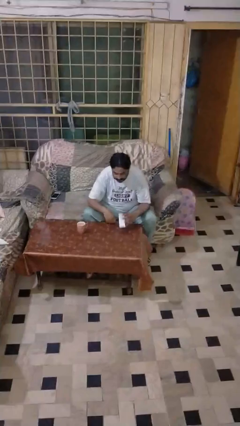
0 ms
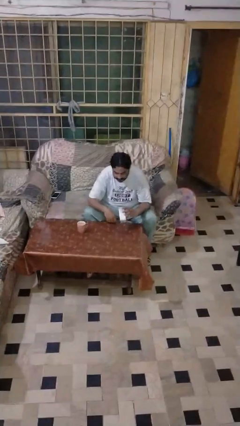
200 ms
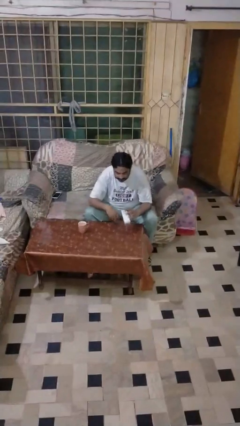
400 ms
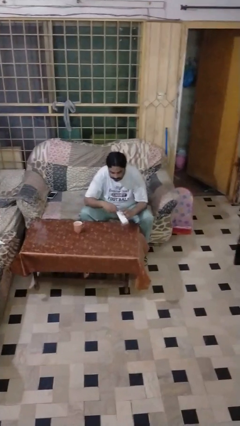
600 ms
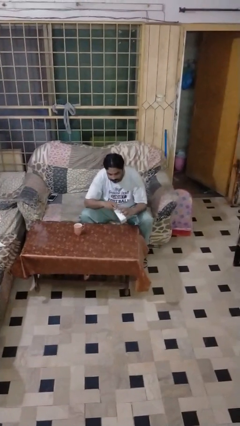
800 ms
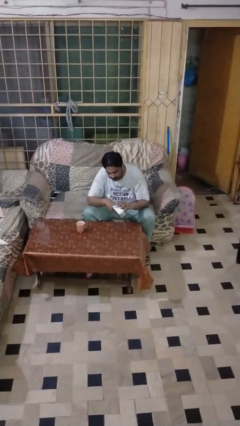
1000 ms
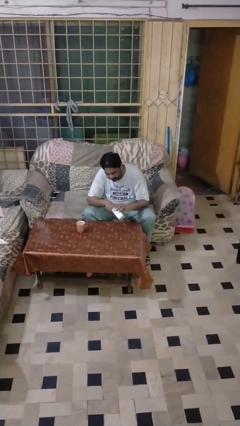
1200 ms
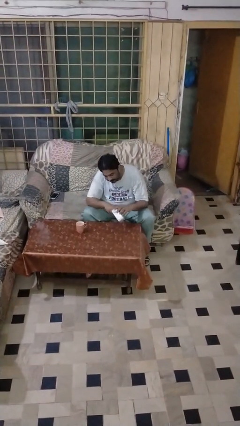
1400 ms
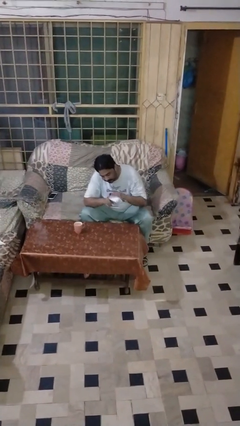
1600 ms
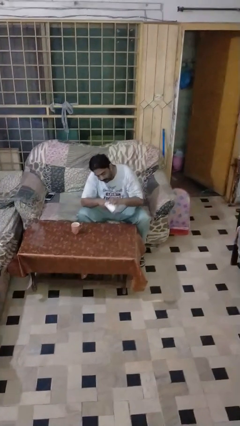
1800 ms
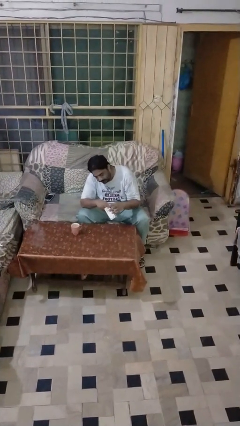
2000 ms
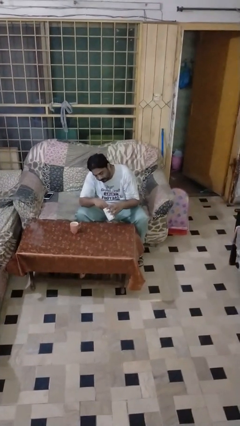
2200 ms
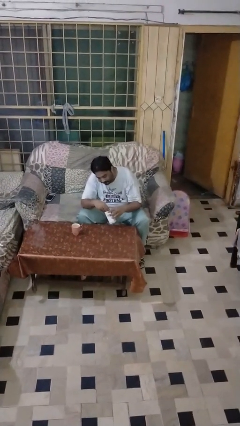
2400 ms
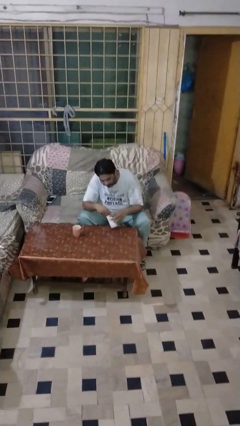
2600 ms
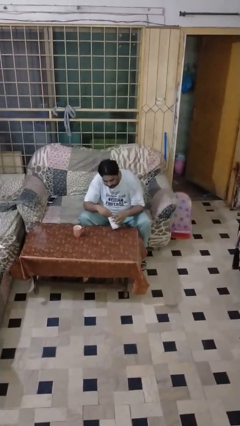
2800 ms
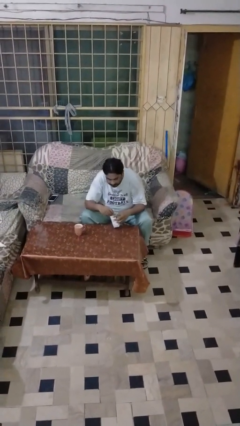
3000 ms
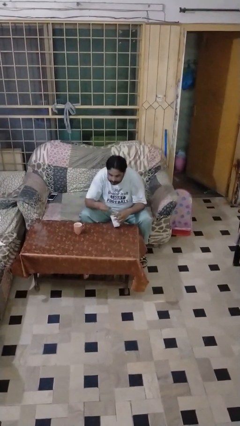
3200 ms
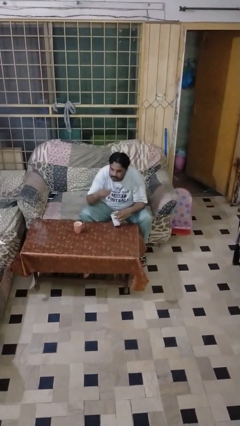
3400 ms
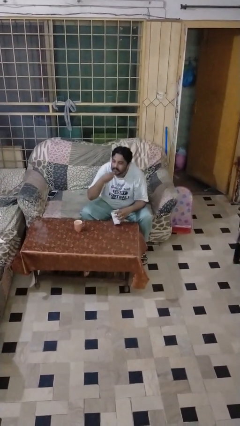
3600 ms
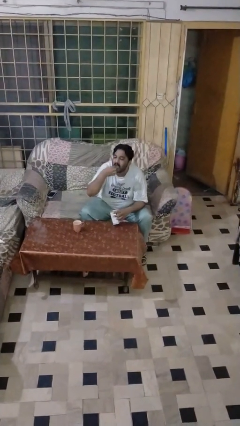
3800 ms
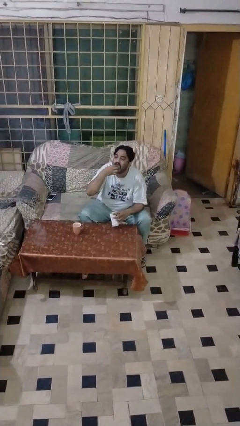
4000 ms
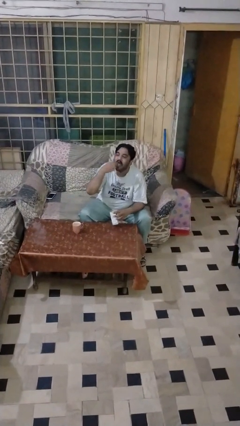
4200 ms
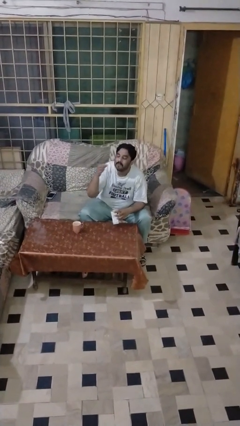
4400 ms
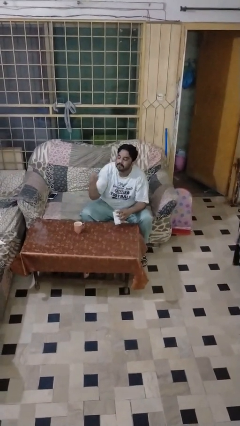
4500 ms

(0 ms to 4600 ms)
person takes medicine pills

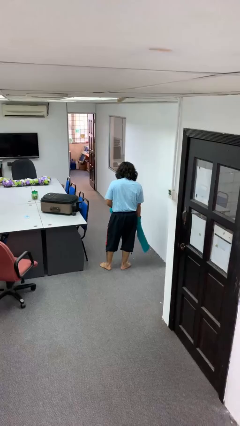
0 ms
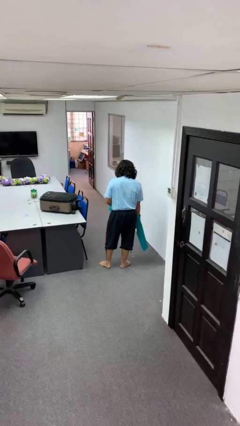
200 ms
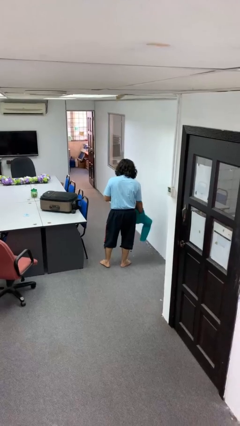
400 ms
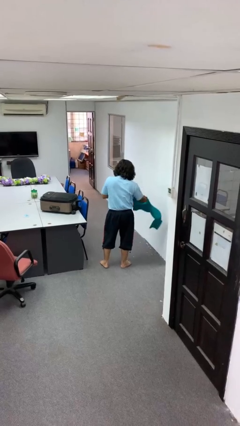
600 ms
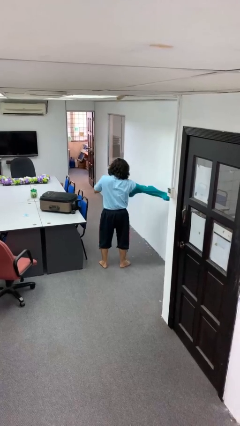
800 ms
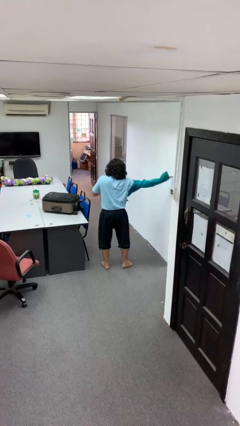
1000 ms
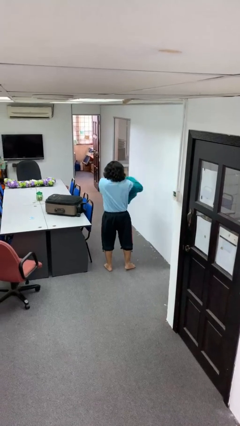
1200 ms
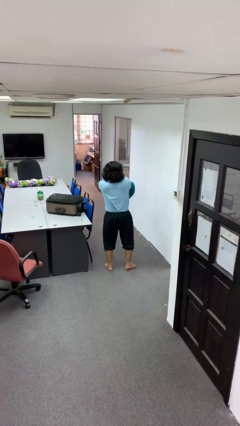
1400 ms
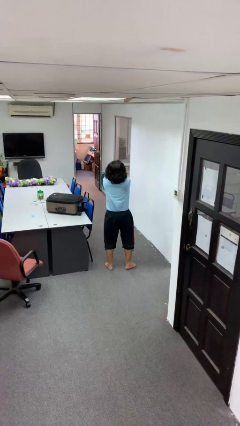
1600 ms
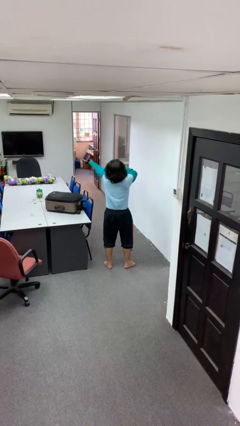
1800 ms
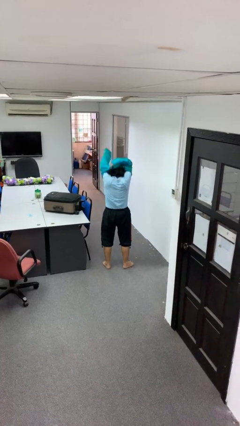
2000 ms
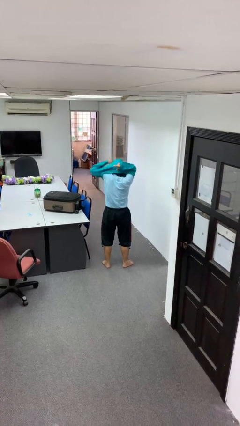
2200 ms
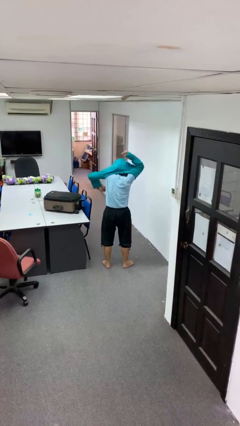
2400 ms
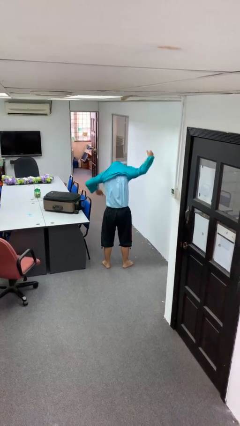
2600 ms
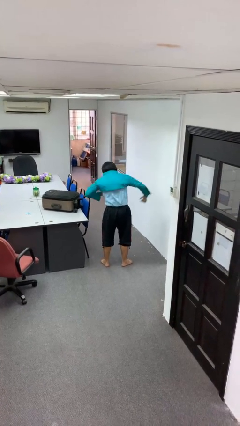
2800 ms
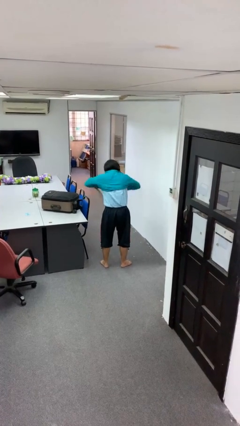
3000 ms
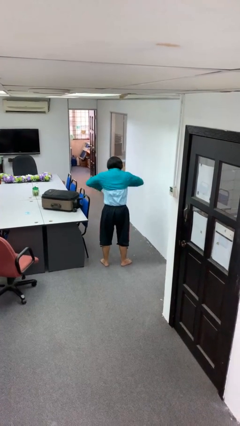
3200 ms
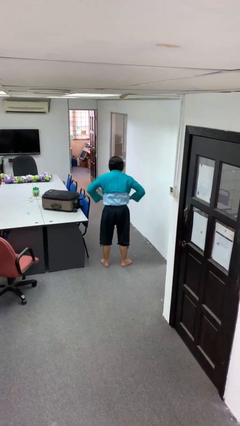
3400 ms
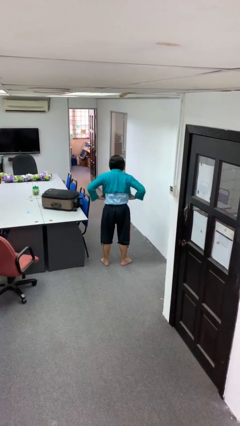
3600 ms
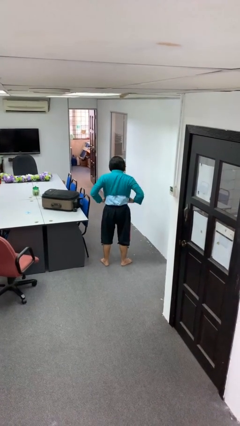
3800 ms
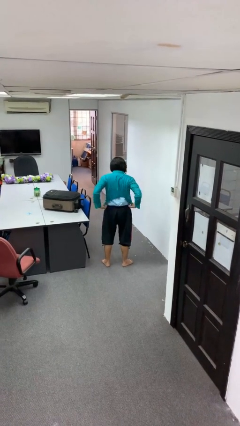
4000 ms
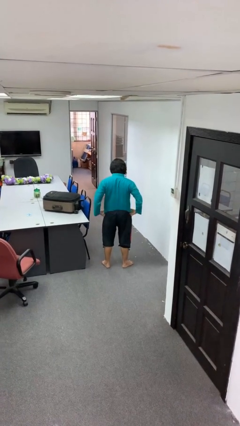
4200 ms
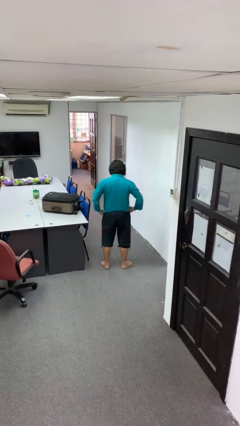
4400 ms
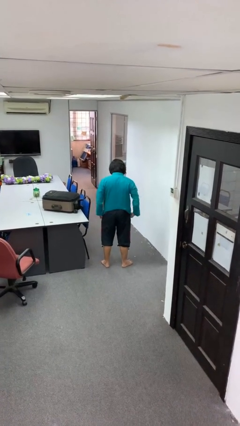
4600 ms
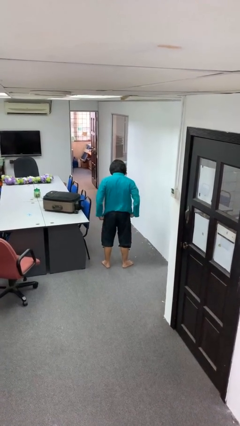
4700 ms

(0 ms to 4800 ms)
person puts on shirt

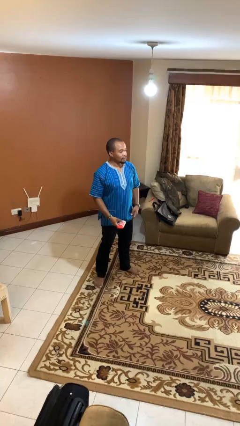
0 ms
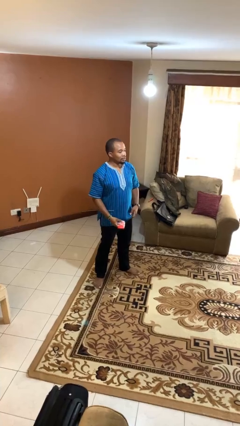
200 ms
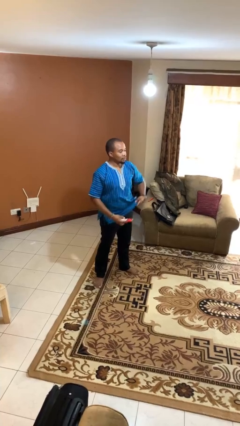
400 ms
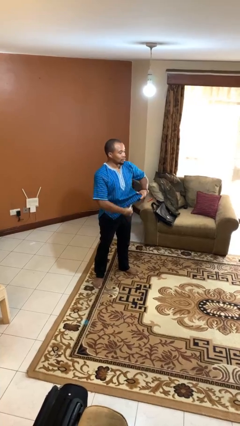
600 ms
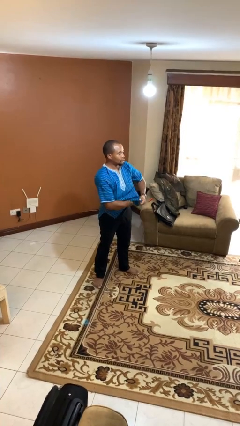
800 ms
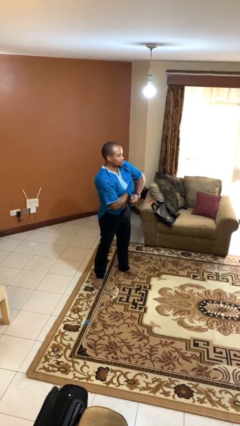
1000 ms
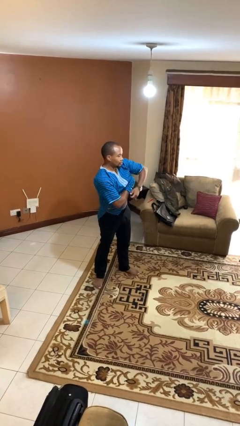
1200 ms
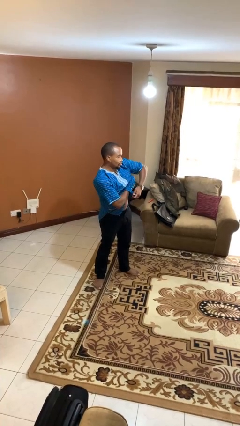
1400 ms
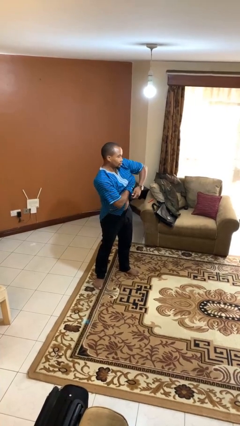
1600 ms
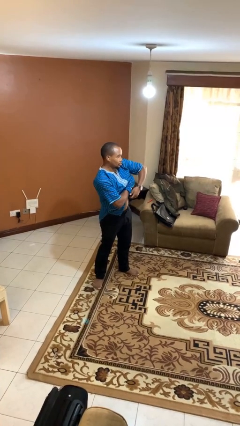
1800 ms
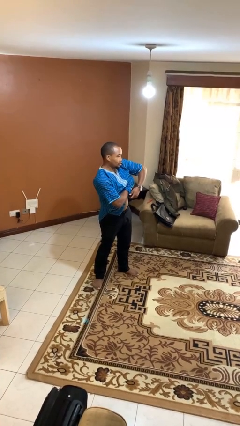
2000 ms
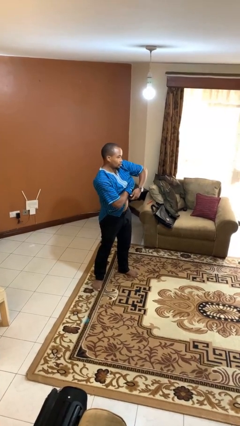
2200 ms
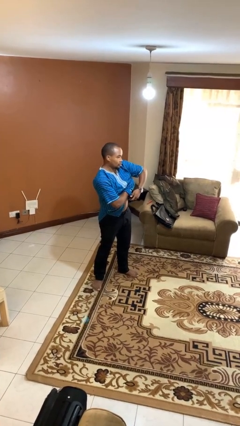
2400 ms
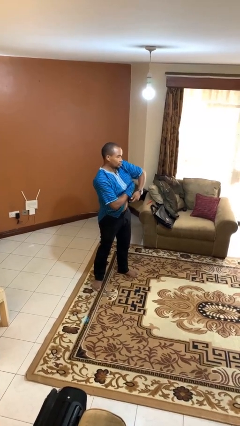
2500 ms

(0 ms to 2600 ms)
person applies deodorant

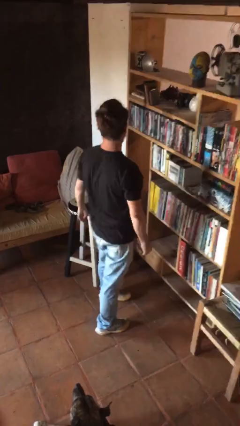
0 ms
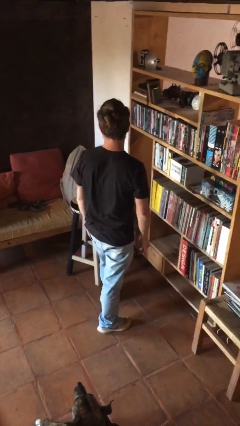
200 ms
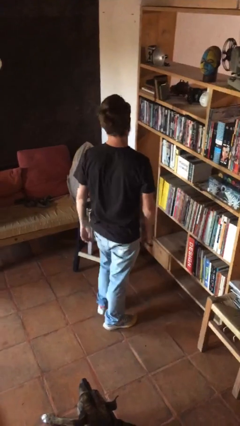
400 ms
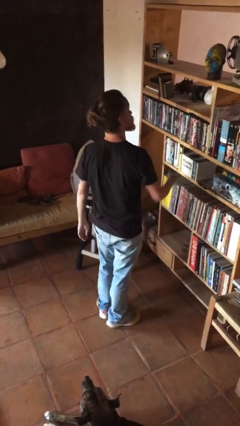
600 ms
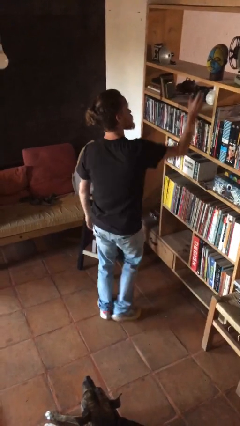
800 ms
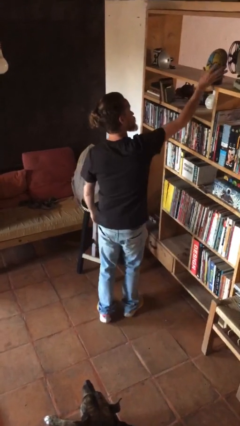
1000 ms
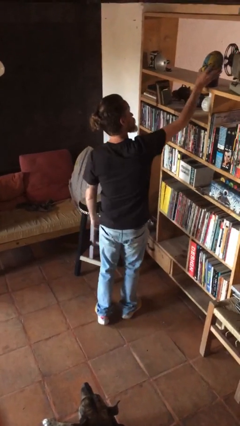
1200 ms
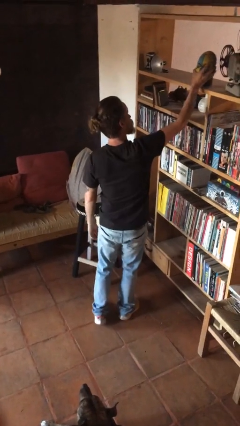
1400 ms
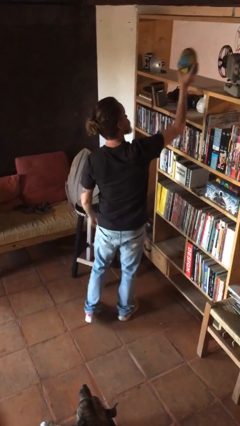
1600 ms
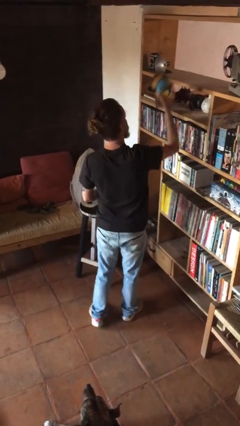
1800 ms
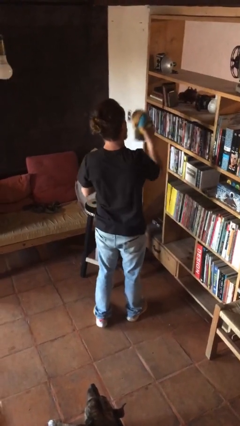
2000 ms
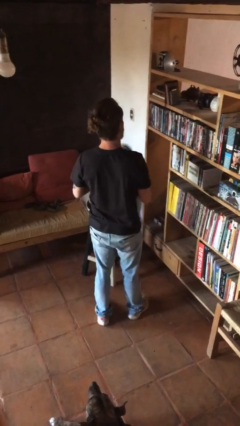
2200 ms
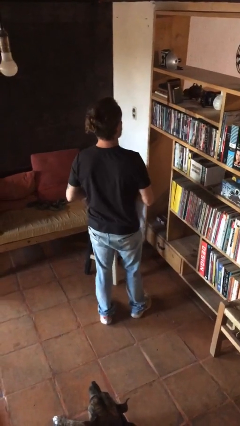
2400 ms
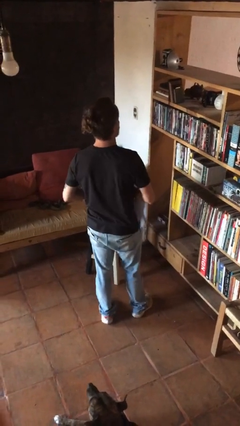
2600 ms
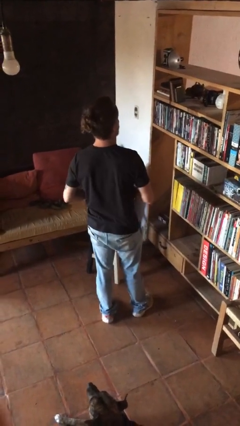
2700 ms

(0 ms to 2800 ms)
person picks up object from countertop

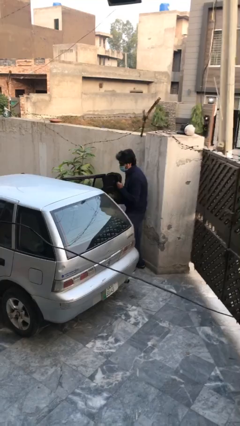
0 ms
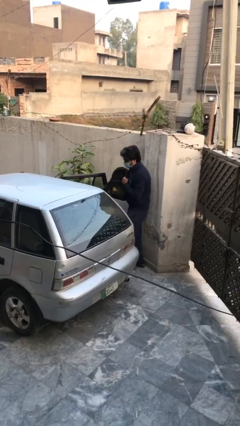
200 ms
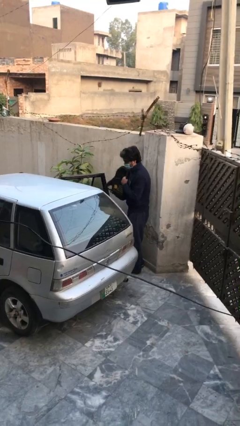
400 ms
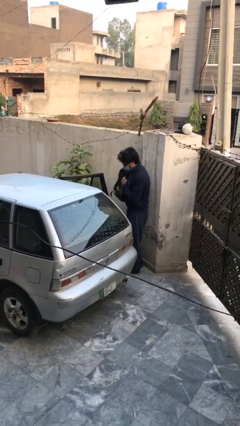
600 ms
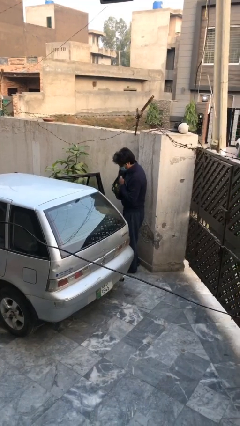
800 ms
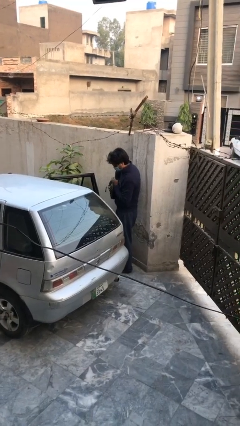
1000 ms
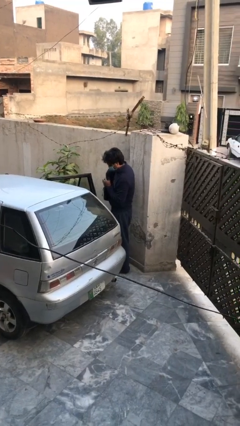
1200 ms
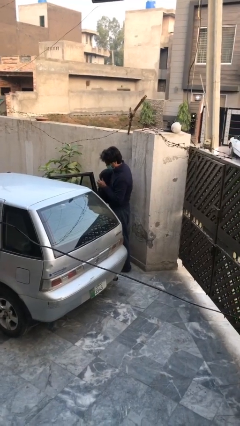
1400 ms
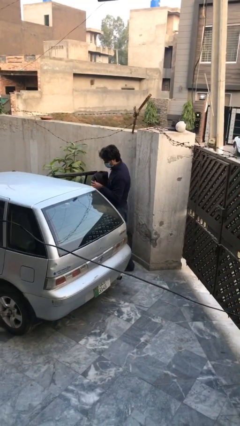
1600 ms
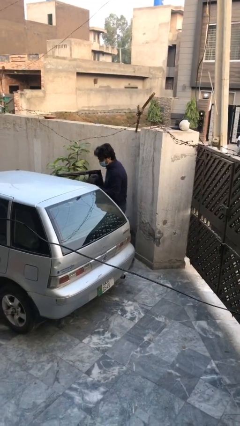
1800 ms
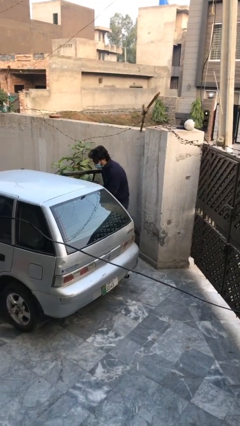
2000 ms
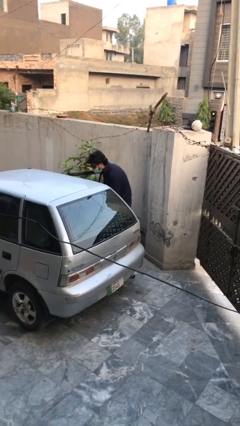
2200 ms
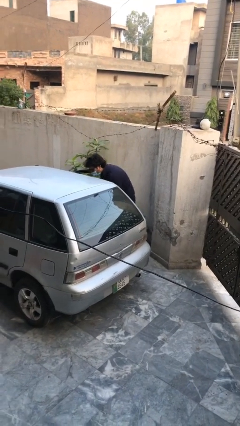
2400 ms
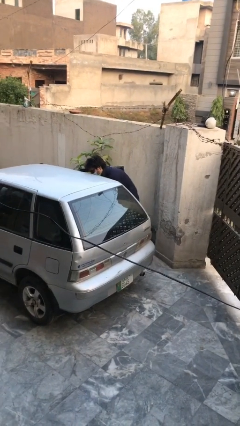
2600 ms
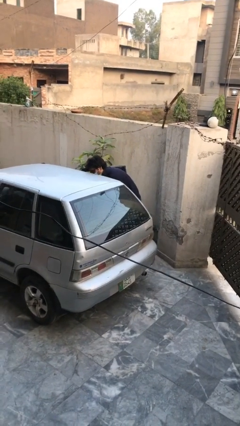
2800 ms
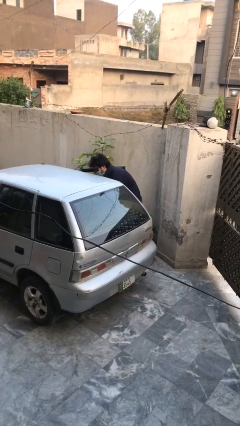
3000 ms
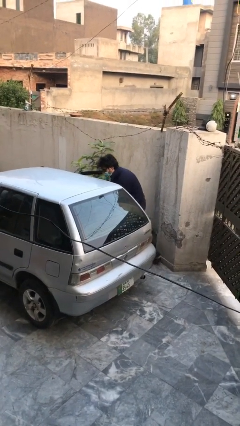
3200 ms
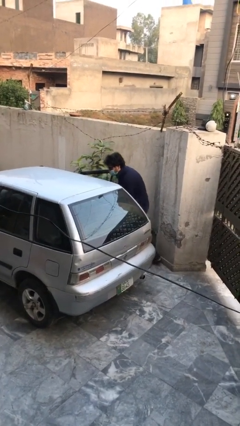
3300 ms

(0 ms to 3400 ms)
person loads car
